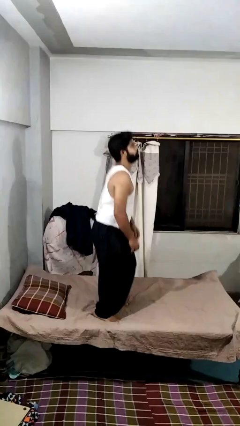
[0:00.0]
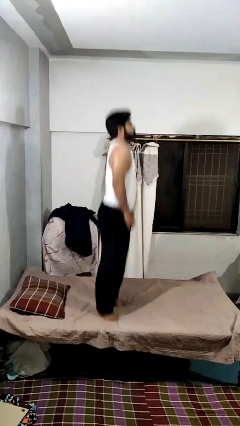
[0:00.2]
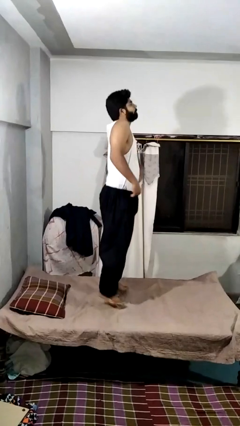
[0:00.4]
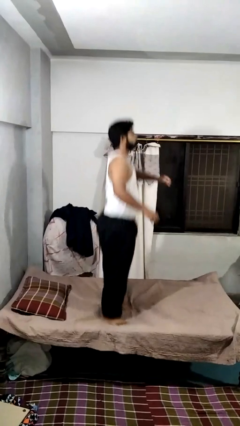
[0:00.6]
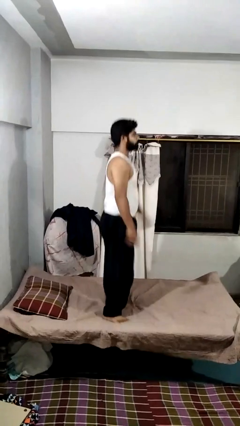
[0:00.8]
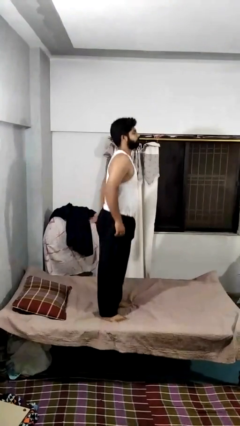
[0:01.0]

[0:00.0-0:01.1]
person jumps on bed

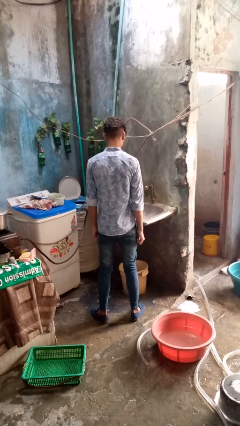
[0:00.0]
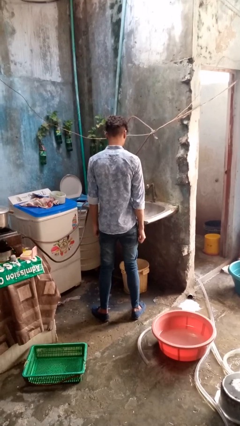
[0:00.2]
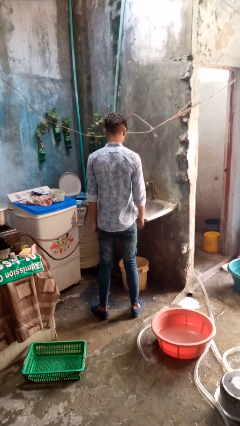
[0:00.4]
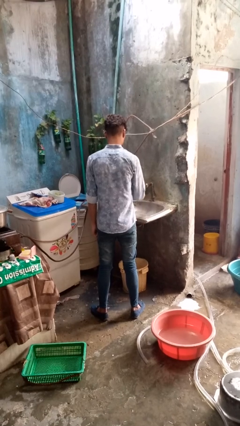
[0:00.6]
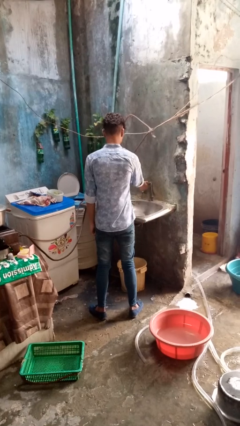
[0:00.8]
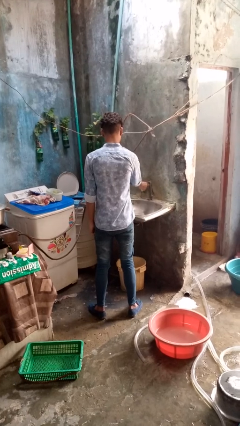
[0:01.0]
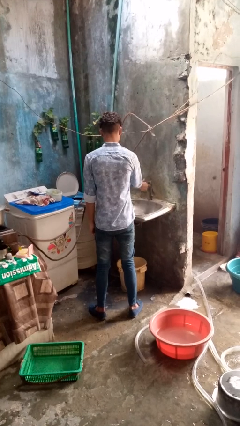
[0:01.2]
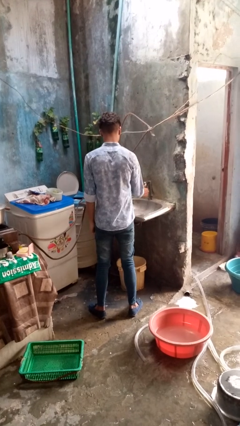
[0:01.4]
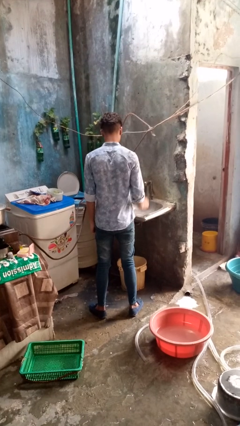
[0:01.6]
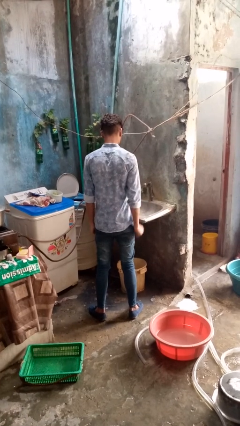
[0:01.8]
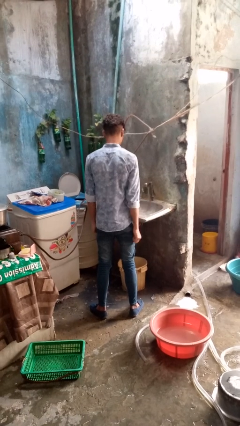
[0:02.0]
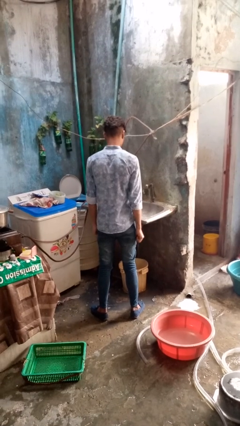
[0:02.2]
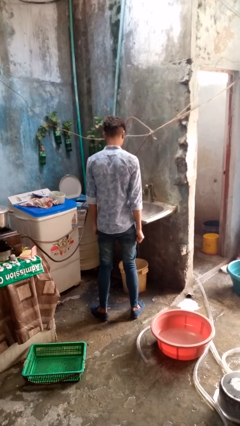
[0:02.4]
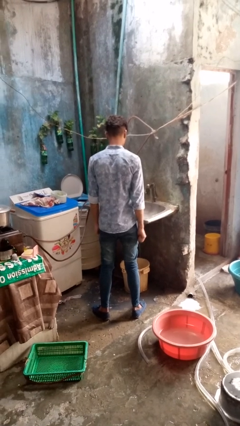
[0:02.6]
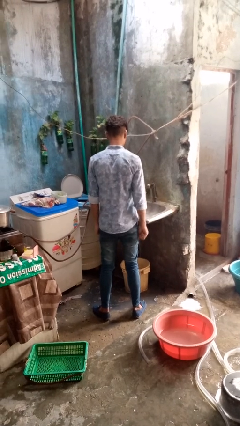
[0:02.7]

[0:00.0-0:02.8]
person turns on faucet

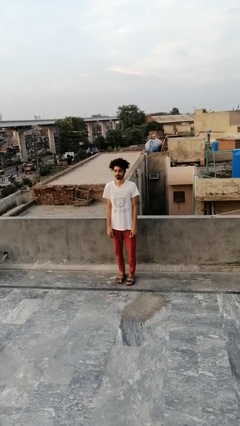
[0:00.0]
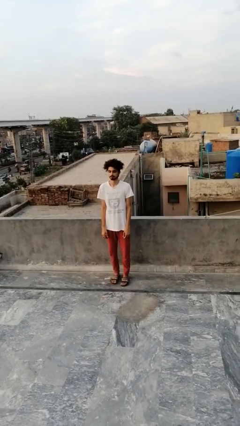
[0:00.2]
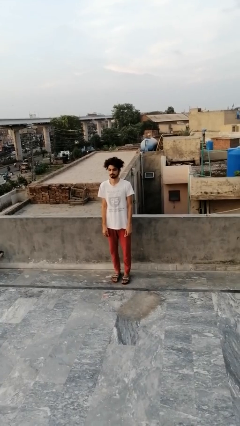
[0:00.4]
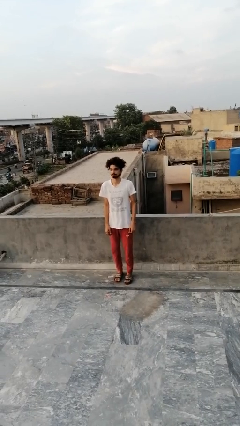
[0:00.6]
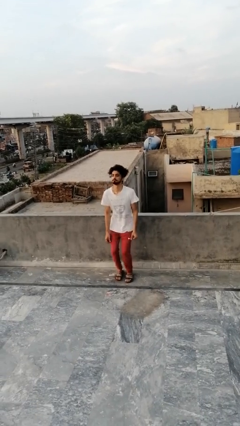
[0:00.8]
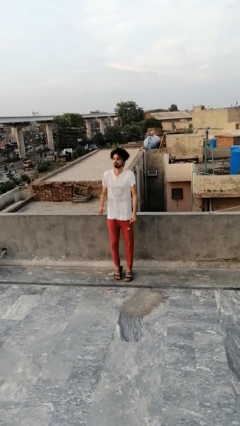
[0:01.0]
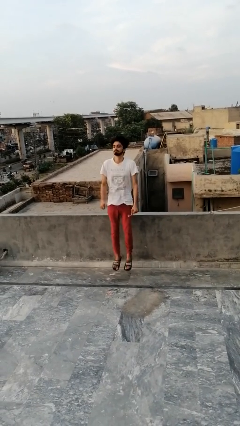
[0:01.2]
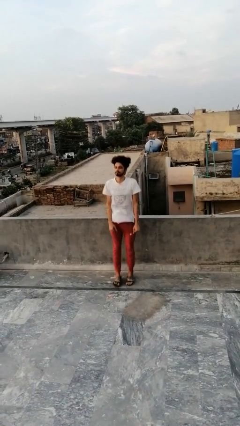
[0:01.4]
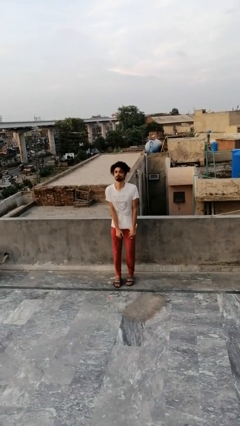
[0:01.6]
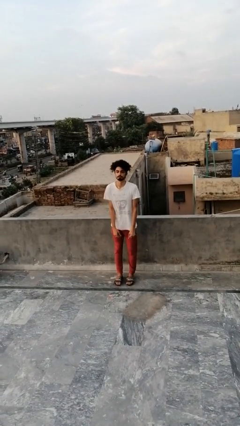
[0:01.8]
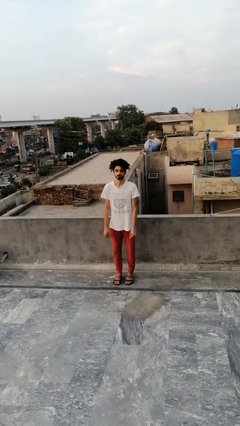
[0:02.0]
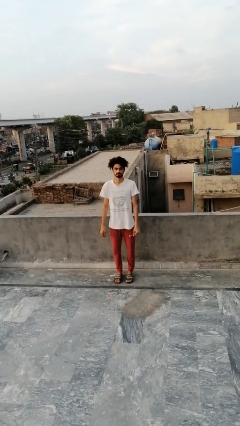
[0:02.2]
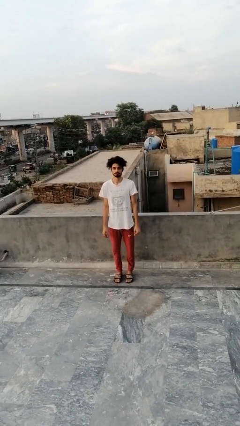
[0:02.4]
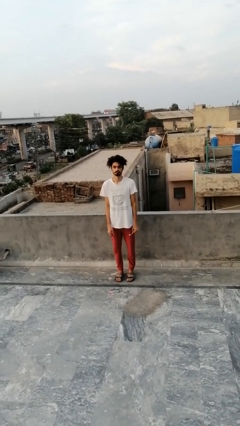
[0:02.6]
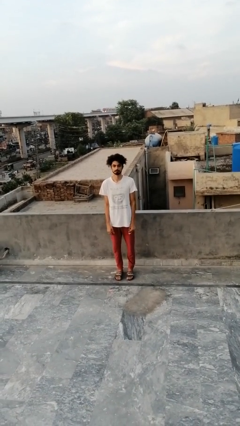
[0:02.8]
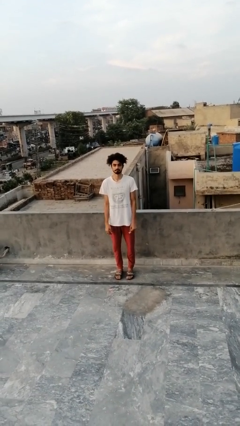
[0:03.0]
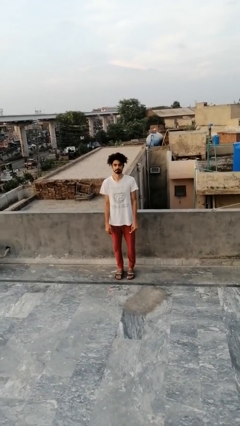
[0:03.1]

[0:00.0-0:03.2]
person jumps

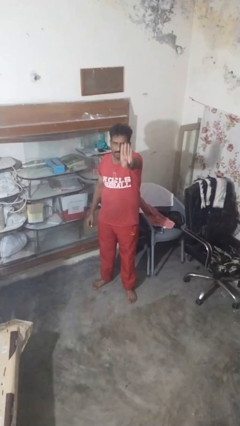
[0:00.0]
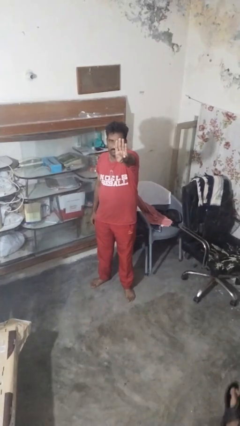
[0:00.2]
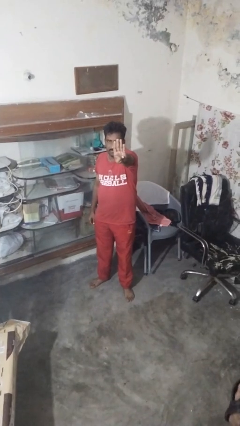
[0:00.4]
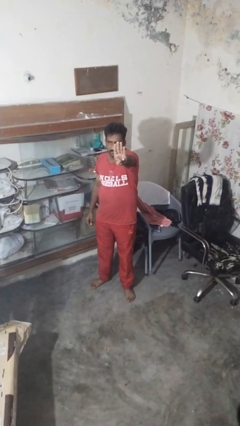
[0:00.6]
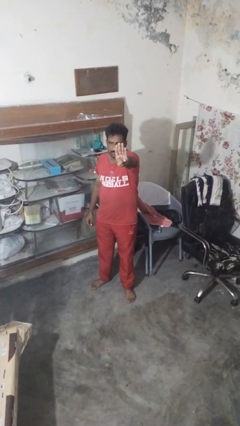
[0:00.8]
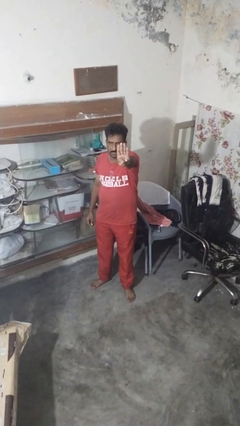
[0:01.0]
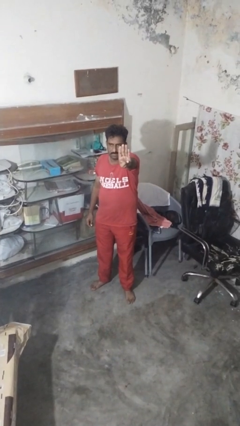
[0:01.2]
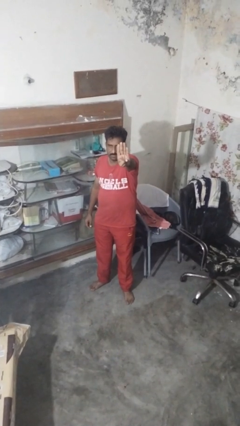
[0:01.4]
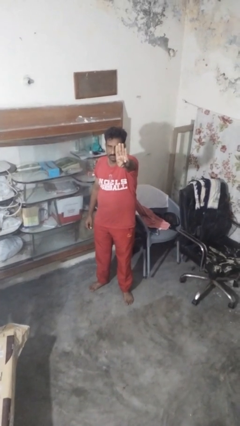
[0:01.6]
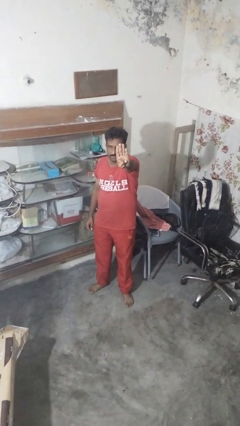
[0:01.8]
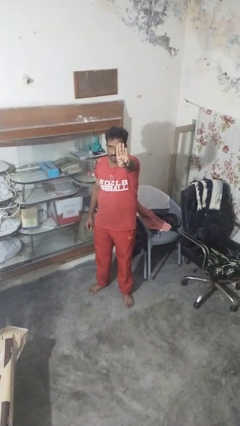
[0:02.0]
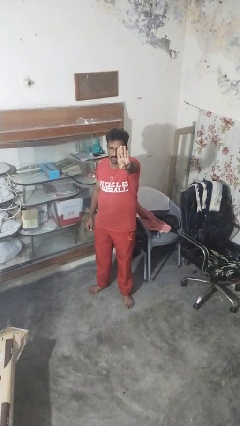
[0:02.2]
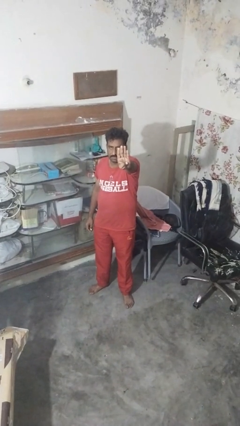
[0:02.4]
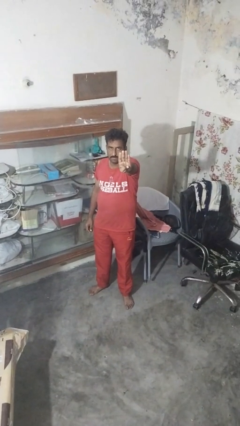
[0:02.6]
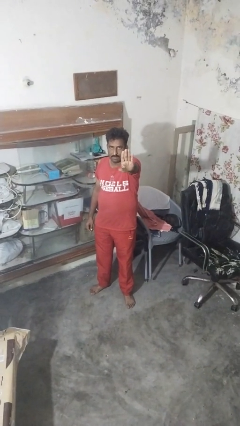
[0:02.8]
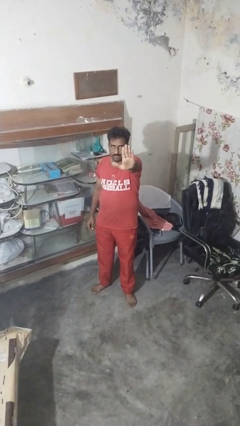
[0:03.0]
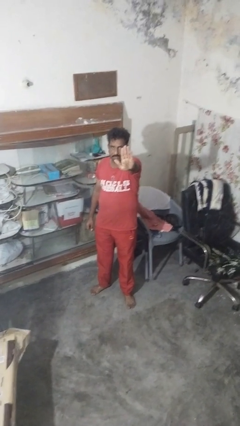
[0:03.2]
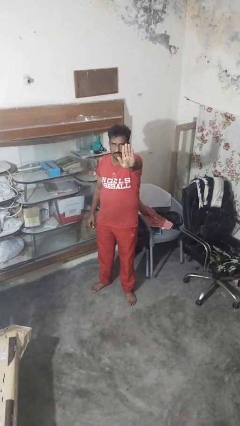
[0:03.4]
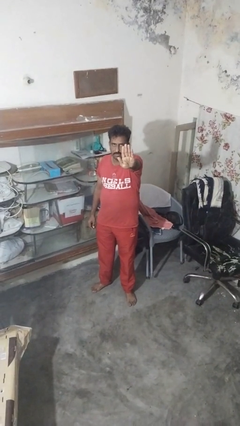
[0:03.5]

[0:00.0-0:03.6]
person gestures stop

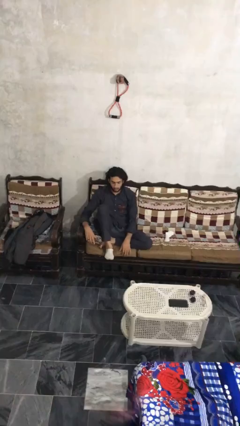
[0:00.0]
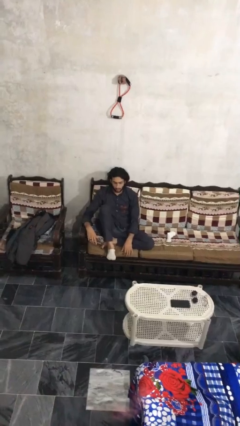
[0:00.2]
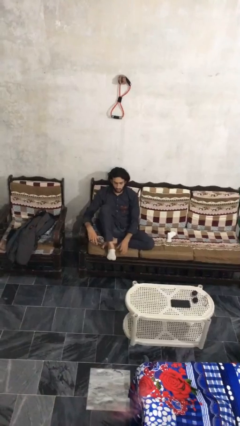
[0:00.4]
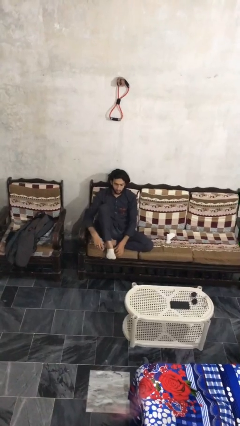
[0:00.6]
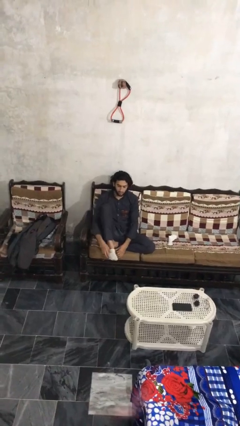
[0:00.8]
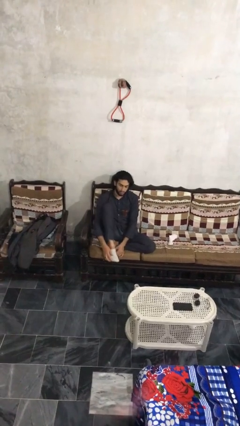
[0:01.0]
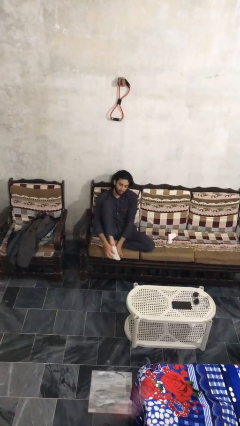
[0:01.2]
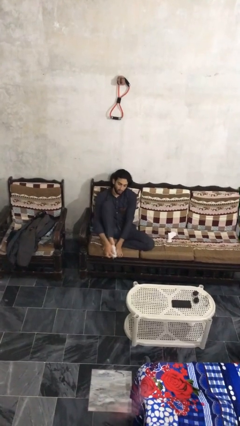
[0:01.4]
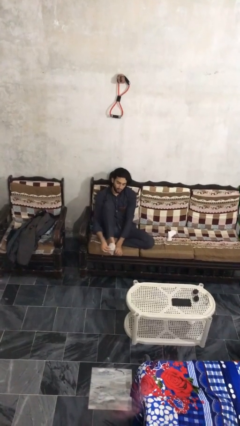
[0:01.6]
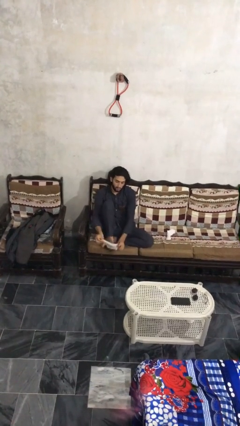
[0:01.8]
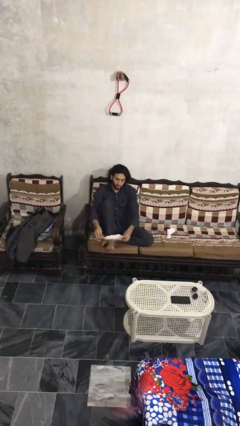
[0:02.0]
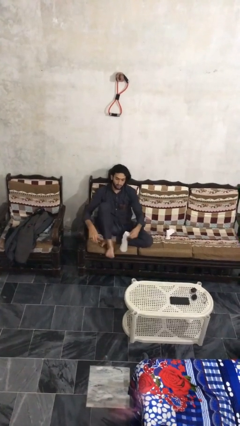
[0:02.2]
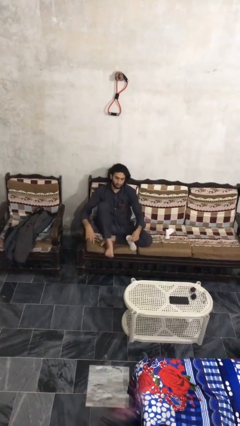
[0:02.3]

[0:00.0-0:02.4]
person takes off socks

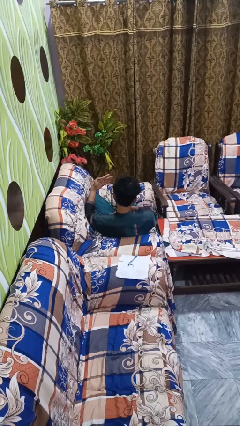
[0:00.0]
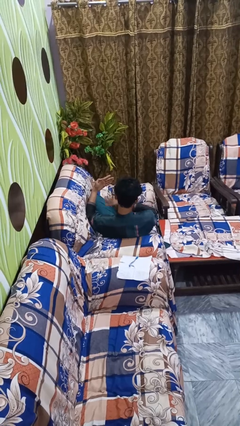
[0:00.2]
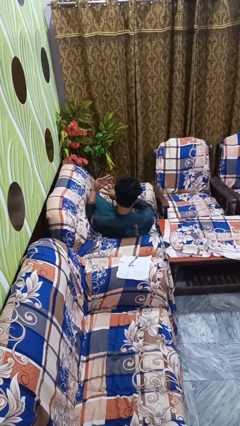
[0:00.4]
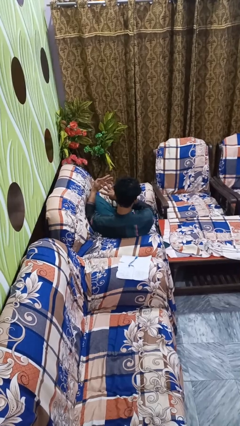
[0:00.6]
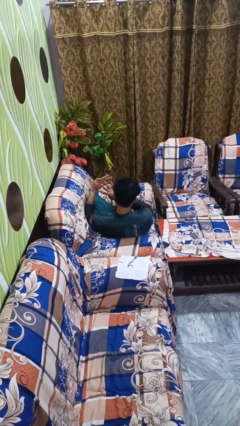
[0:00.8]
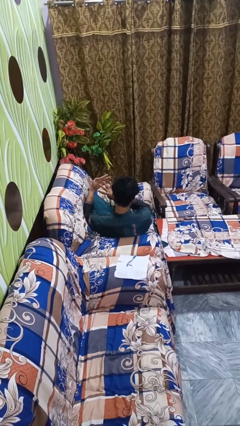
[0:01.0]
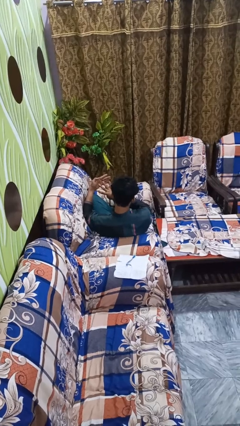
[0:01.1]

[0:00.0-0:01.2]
person gestures number four

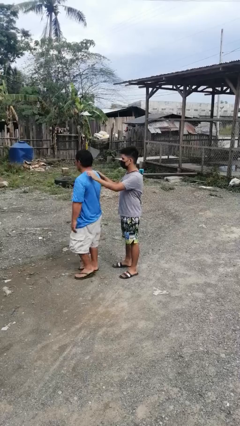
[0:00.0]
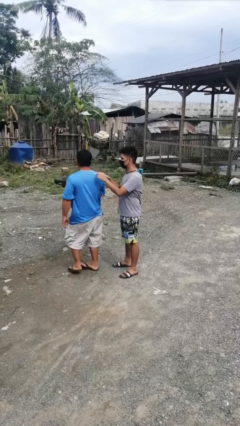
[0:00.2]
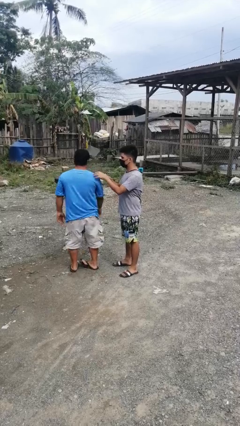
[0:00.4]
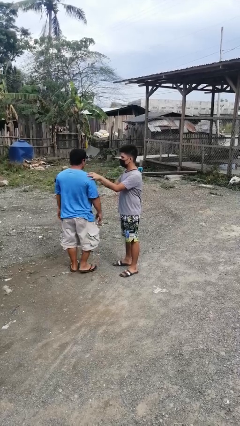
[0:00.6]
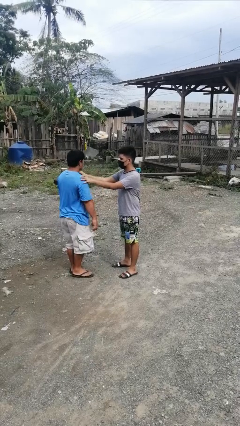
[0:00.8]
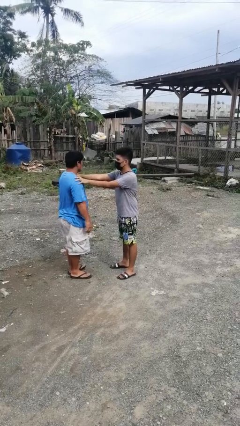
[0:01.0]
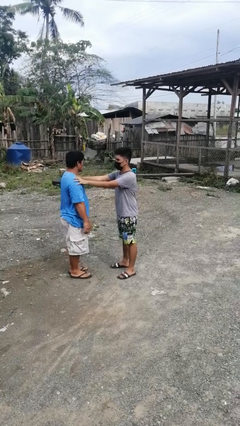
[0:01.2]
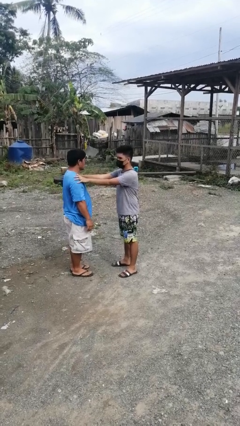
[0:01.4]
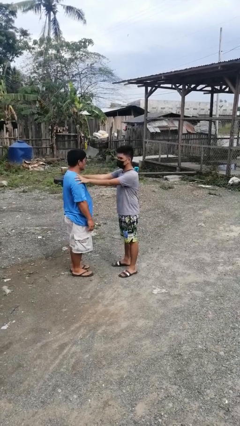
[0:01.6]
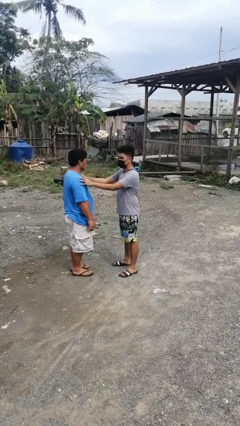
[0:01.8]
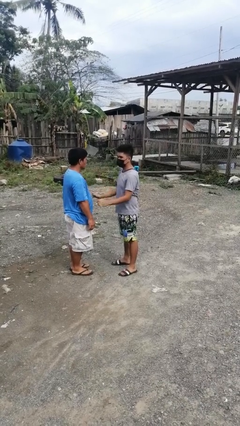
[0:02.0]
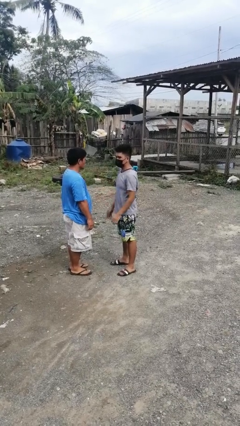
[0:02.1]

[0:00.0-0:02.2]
person spins person around

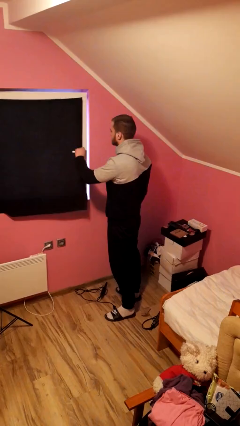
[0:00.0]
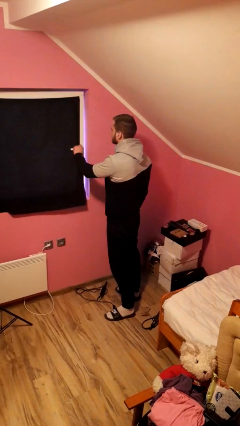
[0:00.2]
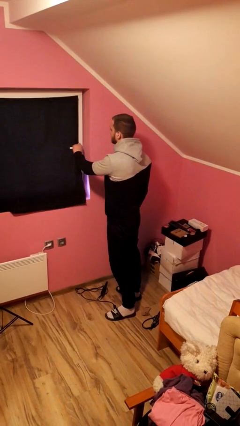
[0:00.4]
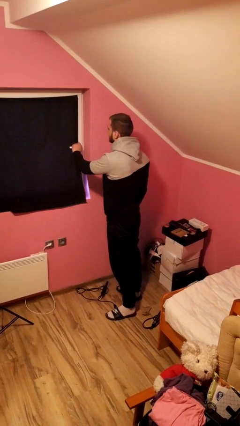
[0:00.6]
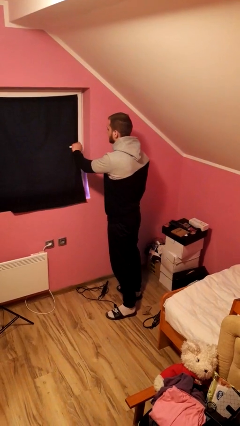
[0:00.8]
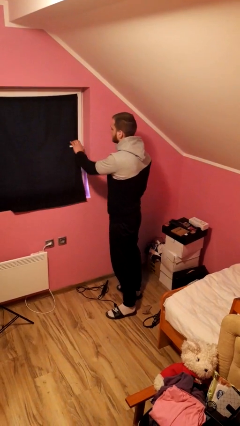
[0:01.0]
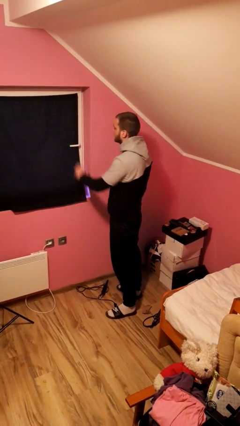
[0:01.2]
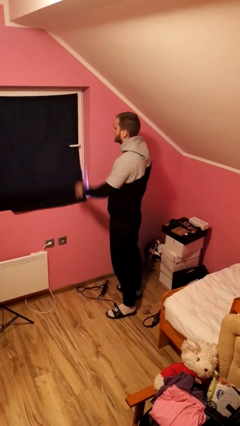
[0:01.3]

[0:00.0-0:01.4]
person closes home window
